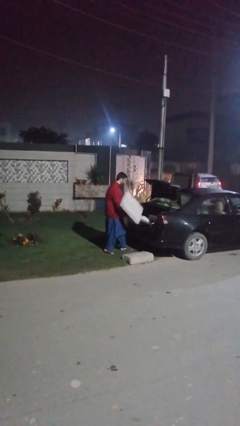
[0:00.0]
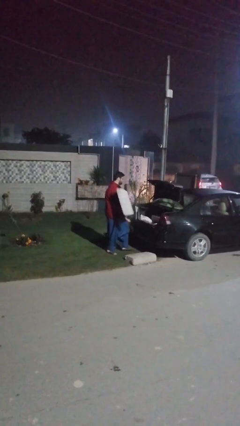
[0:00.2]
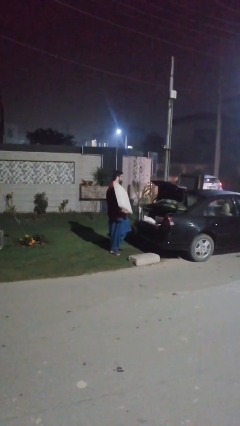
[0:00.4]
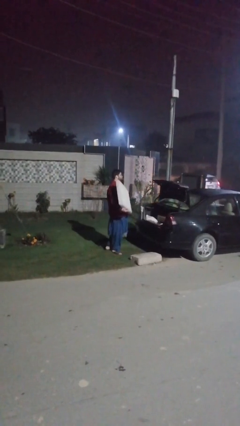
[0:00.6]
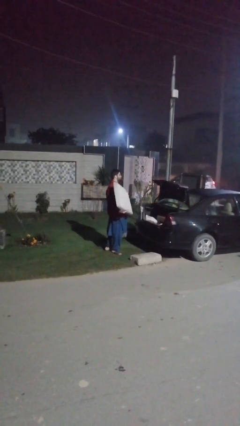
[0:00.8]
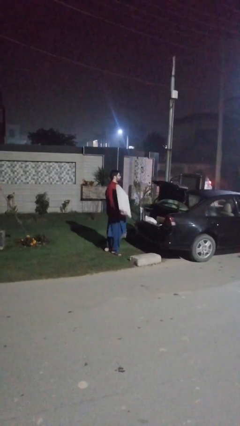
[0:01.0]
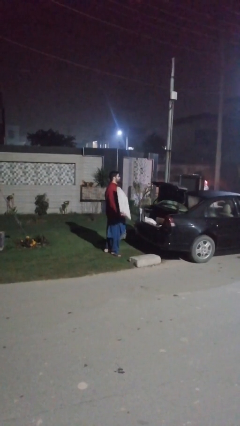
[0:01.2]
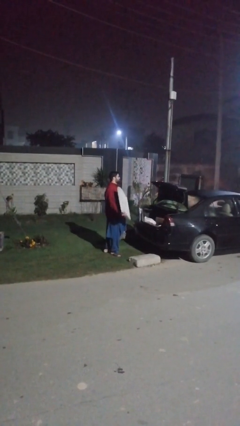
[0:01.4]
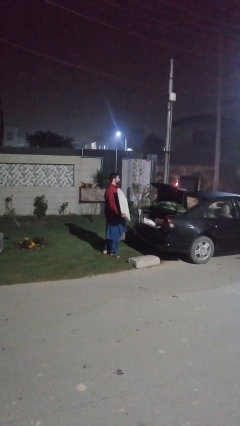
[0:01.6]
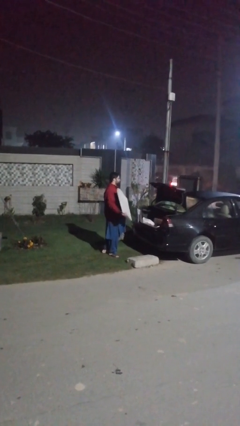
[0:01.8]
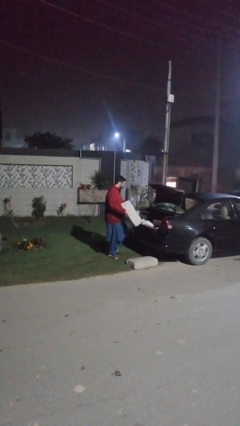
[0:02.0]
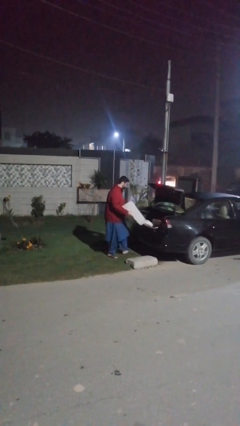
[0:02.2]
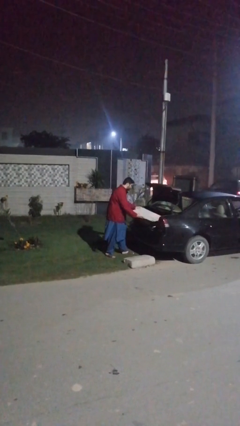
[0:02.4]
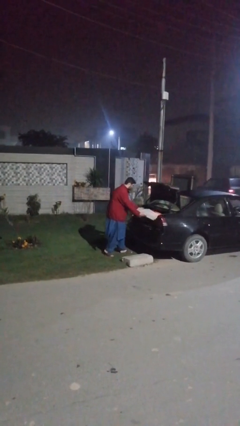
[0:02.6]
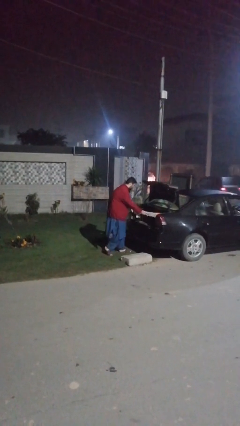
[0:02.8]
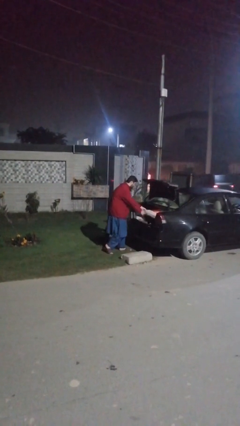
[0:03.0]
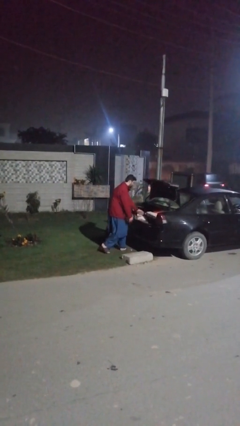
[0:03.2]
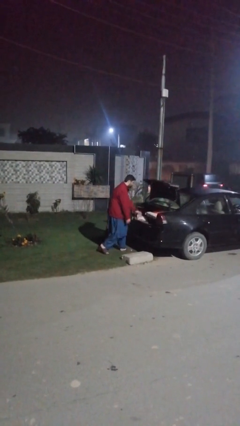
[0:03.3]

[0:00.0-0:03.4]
person unloads car

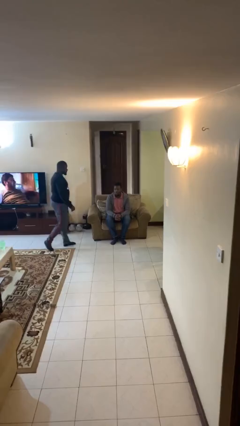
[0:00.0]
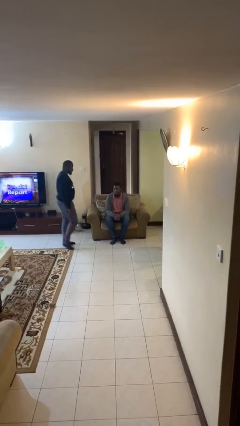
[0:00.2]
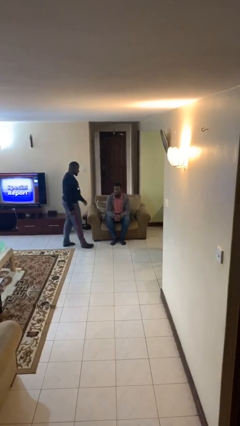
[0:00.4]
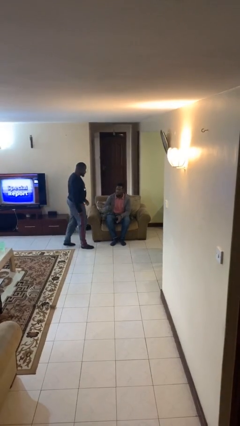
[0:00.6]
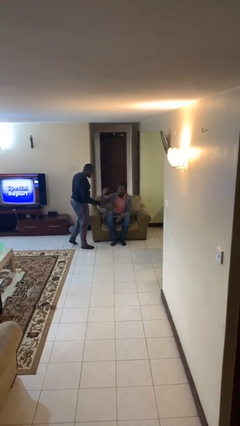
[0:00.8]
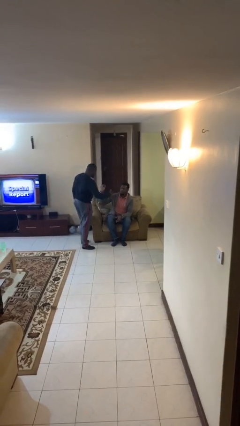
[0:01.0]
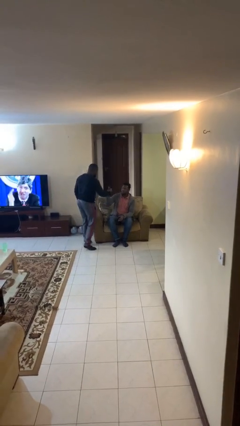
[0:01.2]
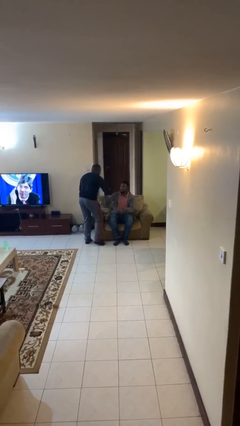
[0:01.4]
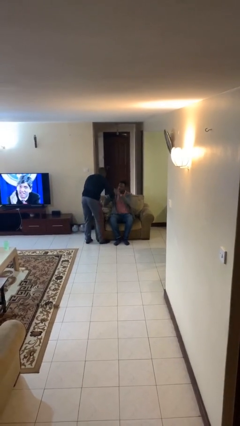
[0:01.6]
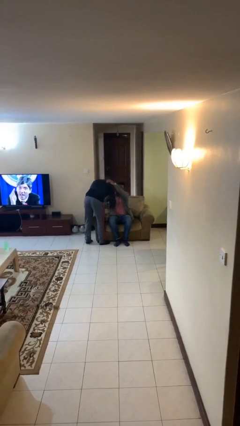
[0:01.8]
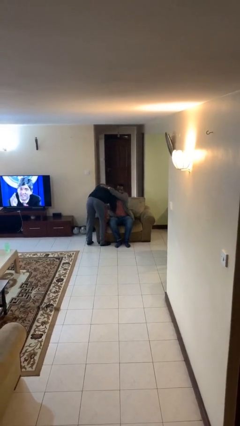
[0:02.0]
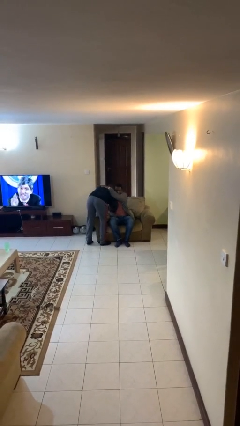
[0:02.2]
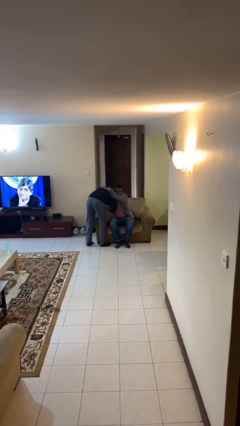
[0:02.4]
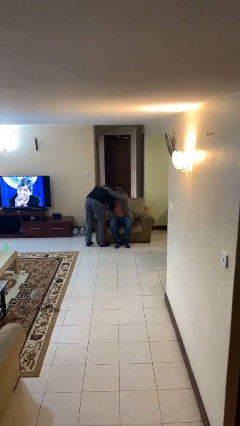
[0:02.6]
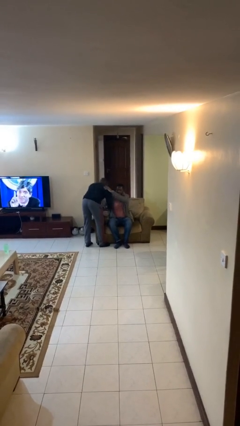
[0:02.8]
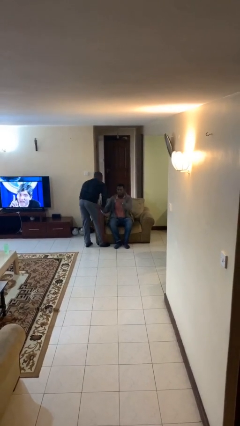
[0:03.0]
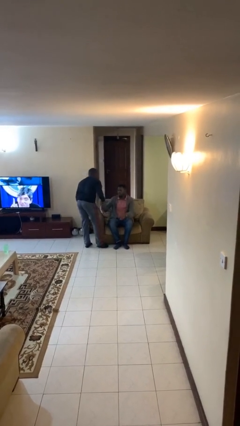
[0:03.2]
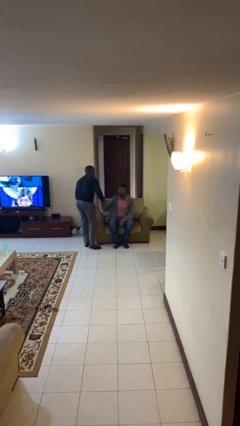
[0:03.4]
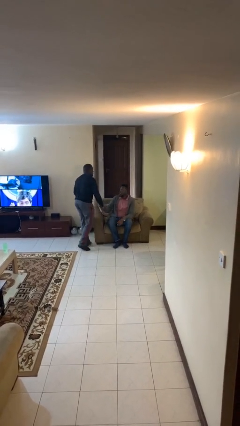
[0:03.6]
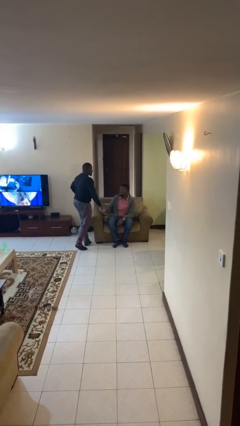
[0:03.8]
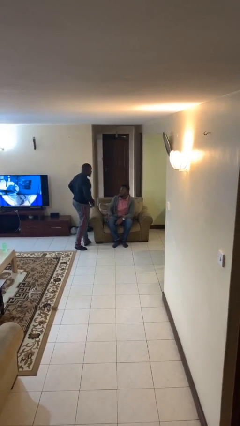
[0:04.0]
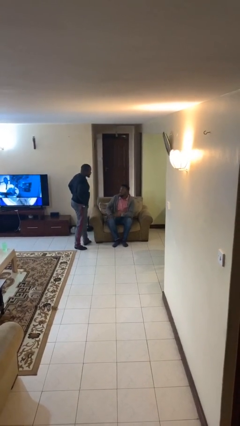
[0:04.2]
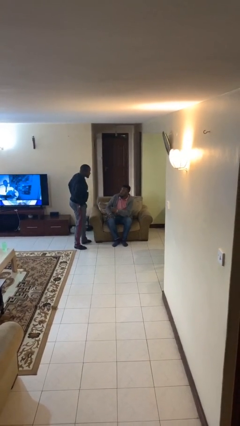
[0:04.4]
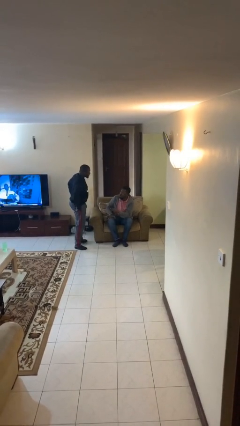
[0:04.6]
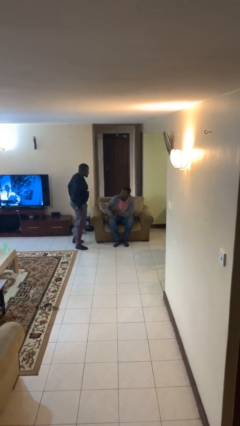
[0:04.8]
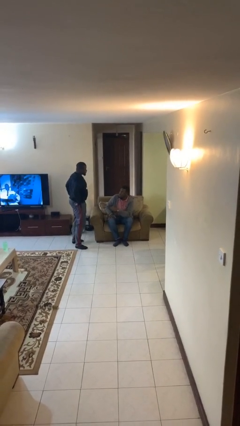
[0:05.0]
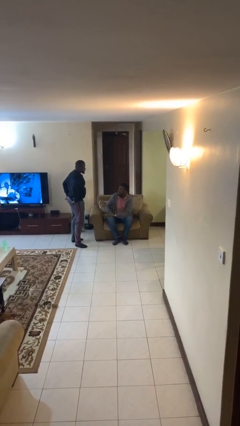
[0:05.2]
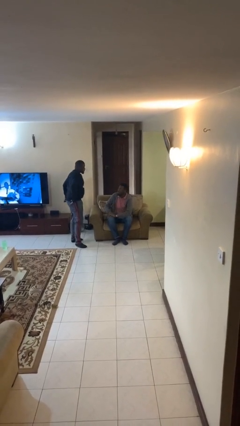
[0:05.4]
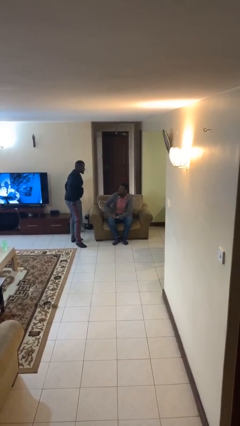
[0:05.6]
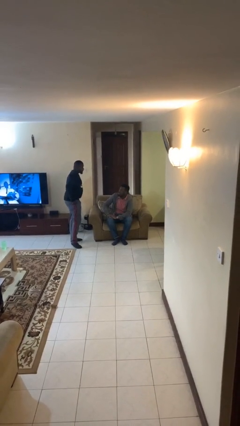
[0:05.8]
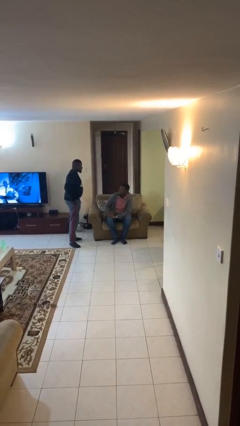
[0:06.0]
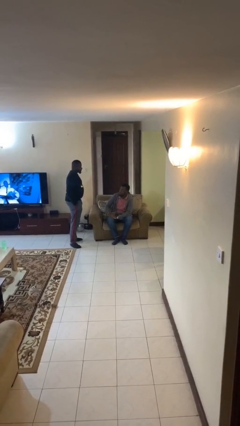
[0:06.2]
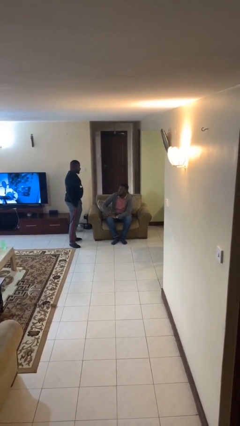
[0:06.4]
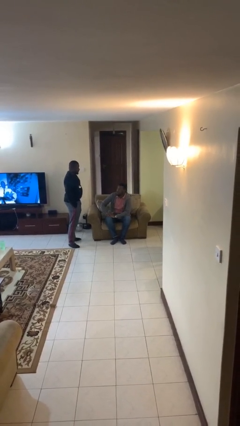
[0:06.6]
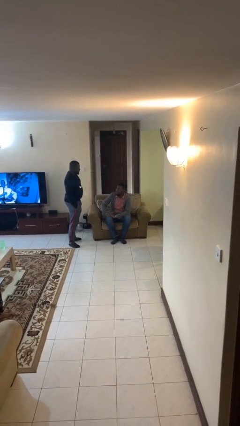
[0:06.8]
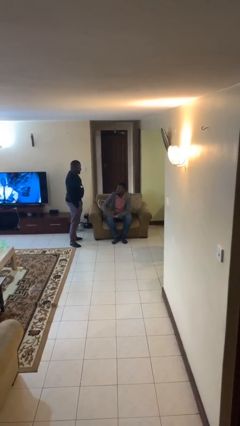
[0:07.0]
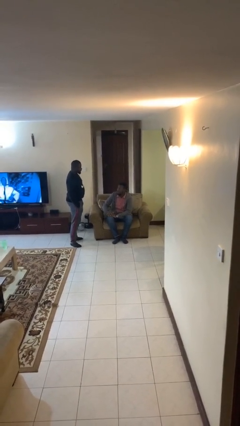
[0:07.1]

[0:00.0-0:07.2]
person embraces person

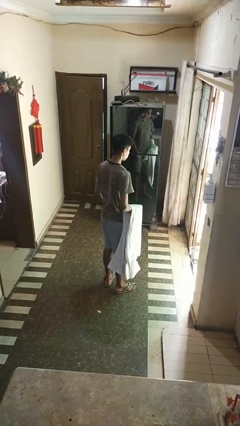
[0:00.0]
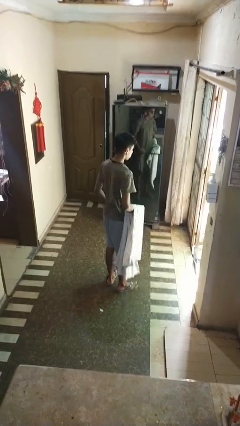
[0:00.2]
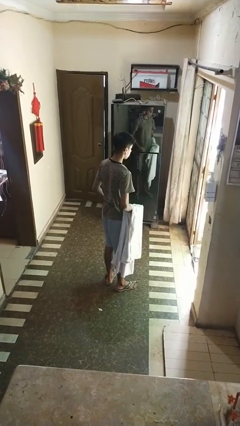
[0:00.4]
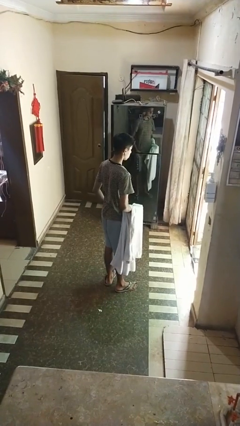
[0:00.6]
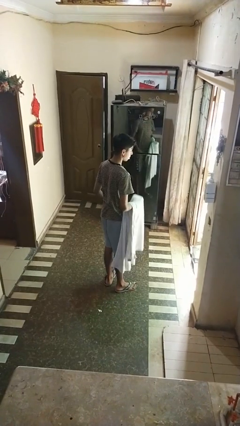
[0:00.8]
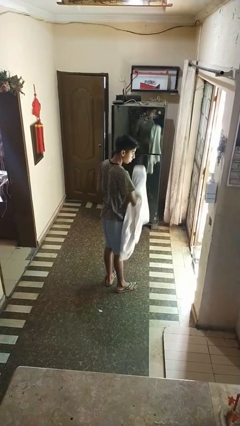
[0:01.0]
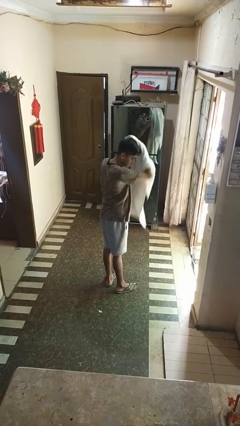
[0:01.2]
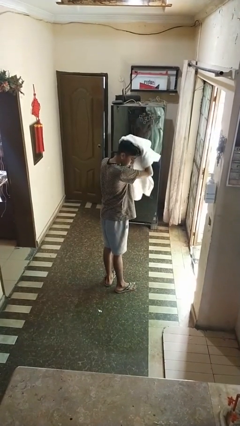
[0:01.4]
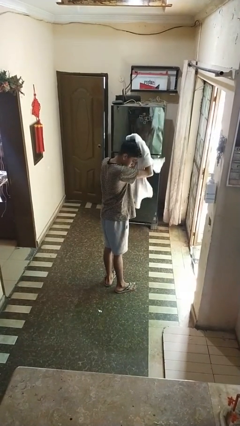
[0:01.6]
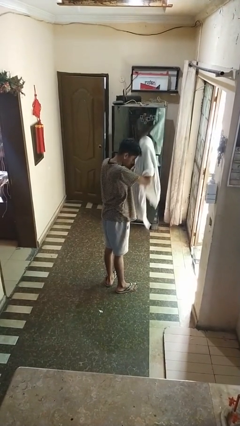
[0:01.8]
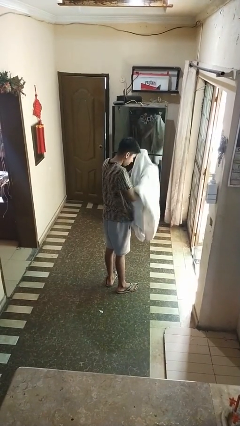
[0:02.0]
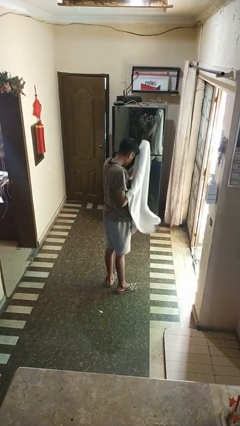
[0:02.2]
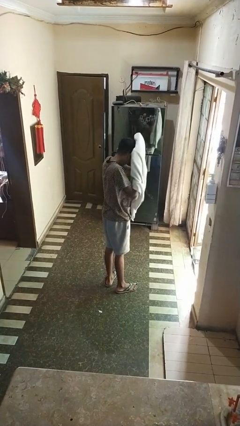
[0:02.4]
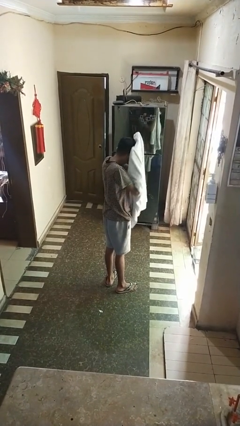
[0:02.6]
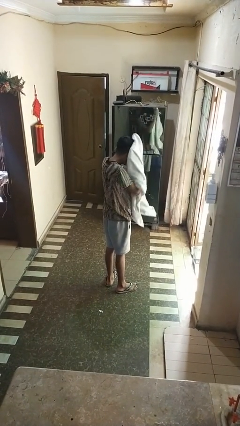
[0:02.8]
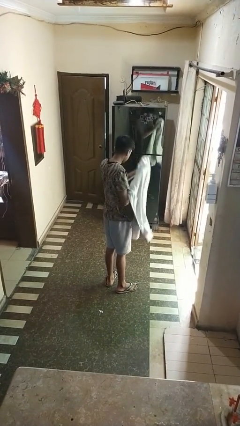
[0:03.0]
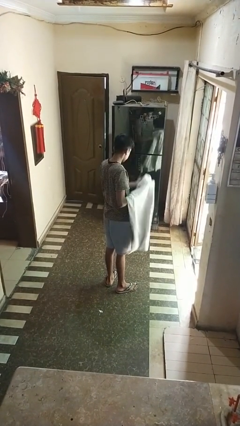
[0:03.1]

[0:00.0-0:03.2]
person dries hair with towel

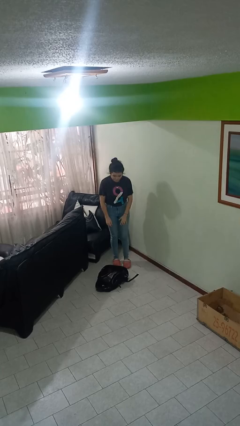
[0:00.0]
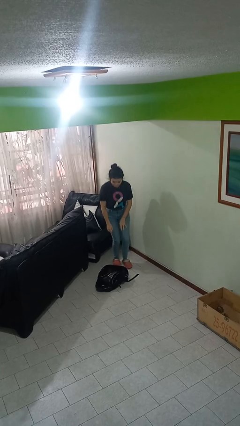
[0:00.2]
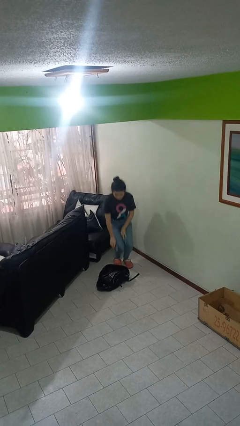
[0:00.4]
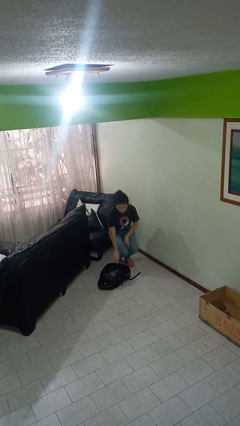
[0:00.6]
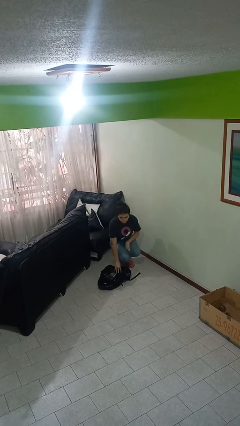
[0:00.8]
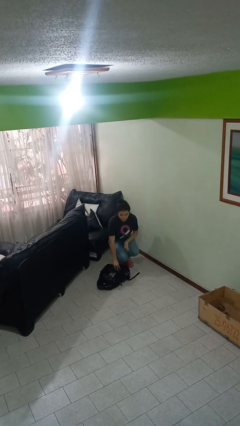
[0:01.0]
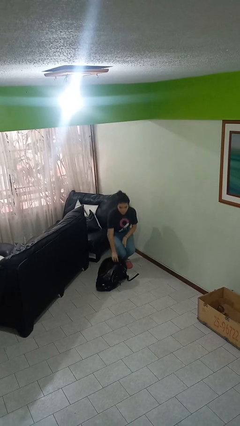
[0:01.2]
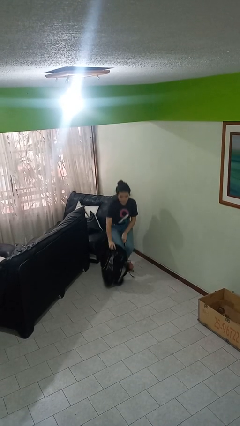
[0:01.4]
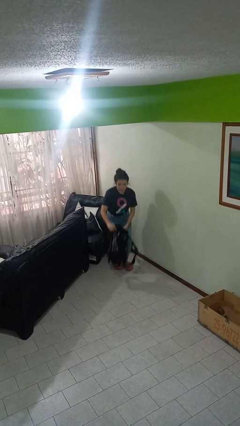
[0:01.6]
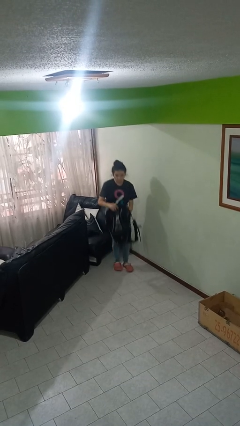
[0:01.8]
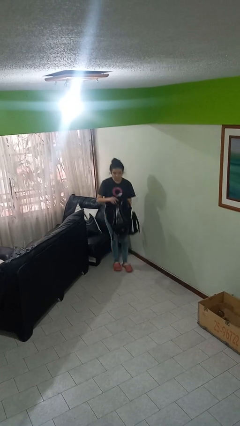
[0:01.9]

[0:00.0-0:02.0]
person picks up object from floor

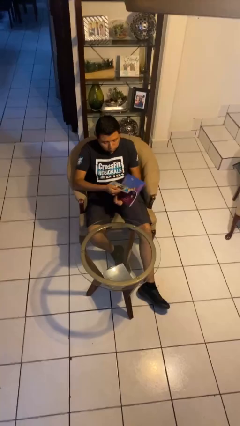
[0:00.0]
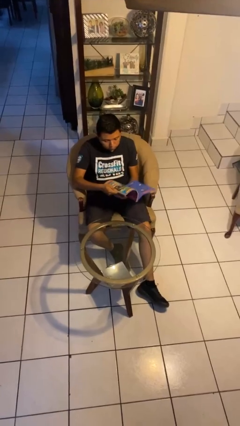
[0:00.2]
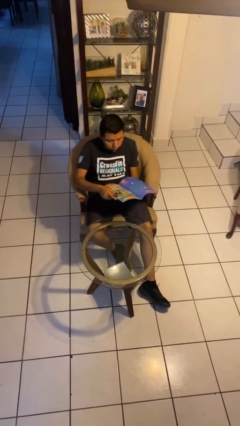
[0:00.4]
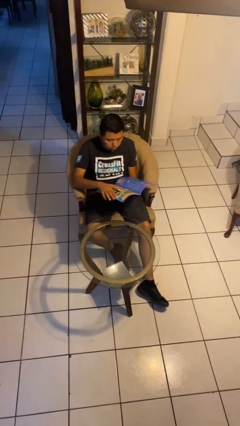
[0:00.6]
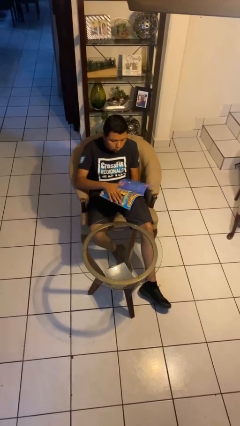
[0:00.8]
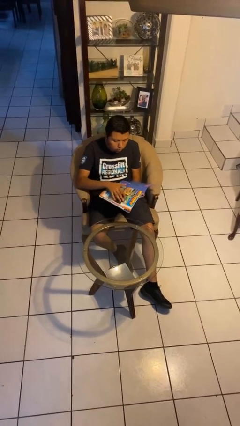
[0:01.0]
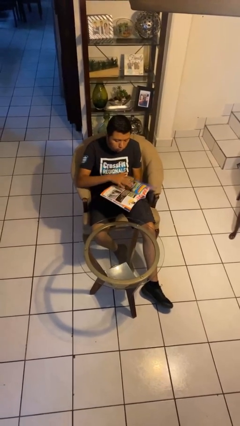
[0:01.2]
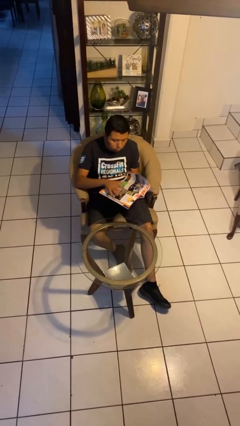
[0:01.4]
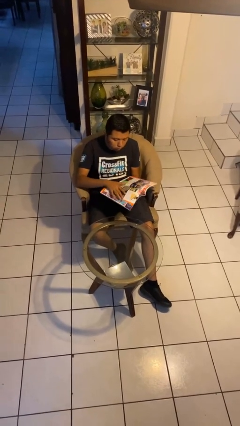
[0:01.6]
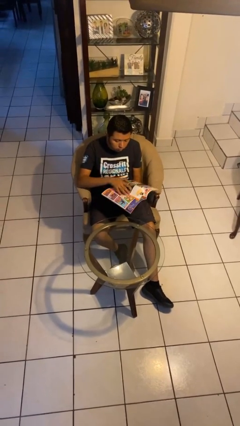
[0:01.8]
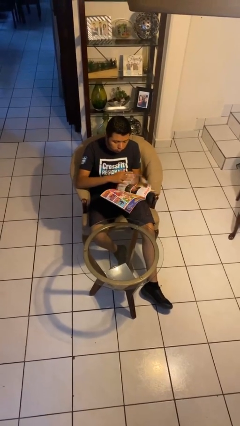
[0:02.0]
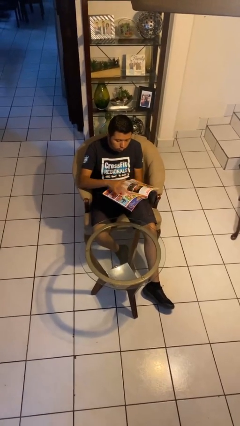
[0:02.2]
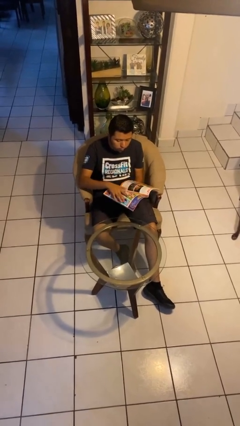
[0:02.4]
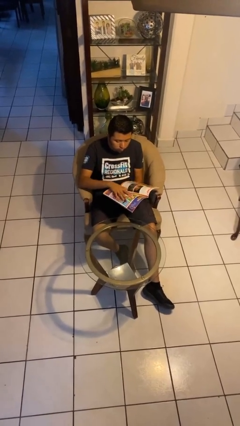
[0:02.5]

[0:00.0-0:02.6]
person reads magazine
